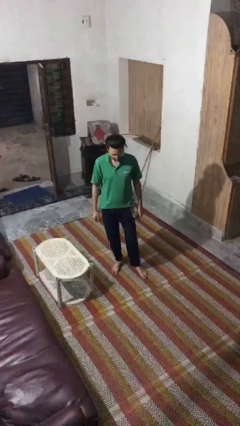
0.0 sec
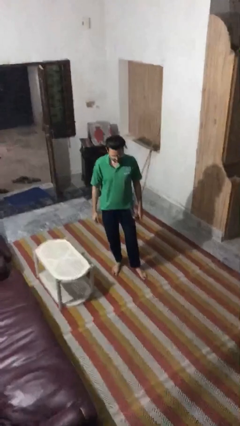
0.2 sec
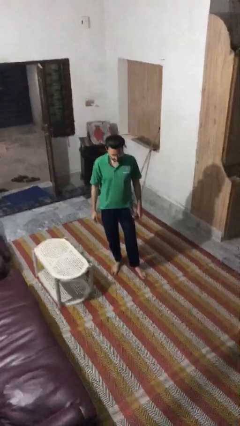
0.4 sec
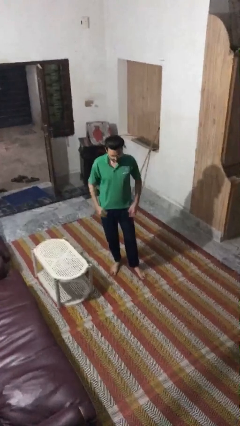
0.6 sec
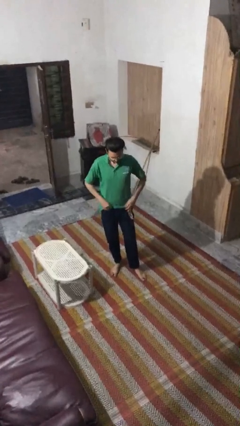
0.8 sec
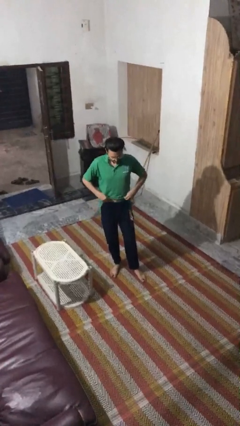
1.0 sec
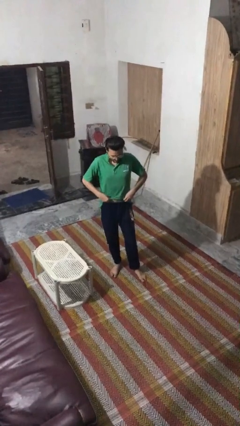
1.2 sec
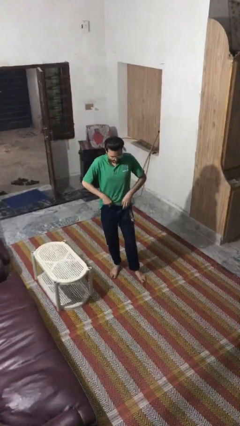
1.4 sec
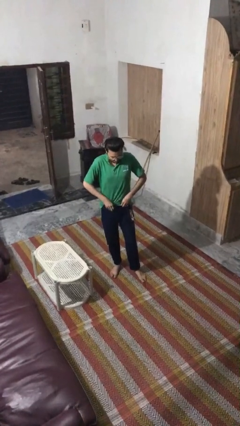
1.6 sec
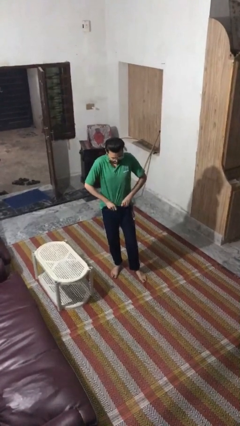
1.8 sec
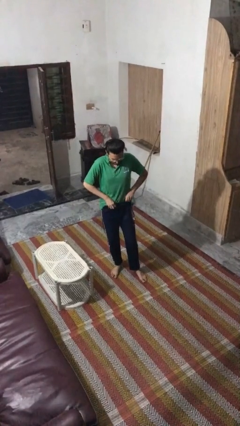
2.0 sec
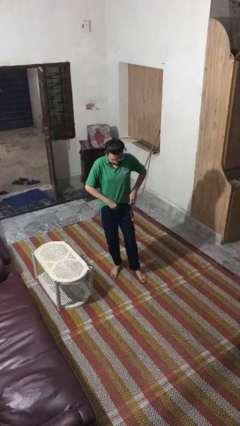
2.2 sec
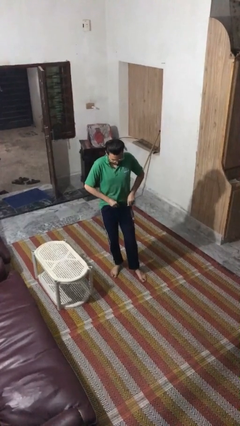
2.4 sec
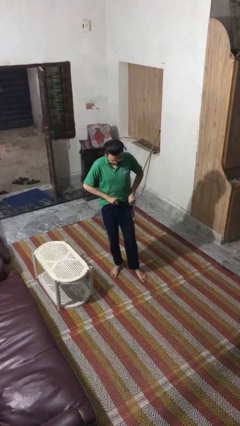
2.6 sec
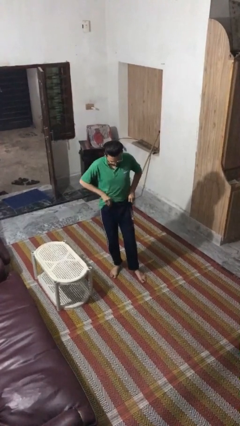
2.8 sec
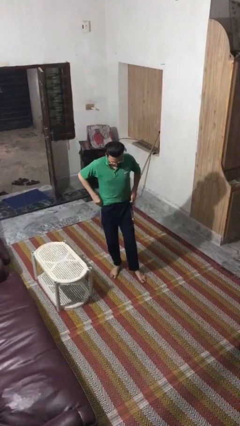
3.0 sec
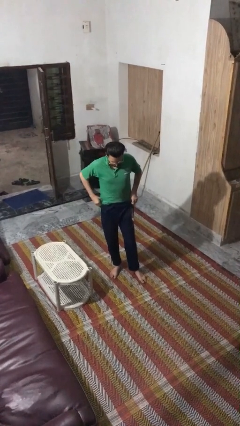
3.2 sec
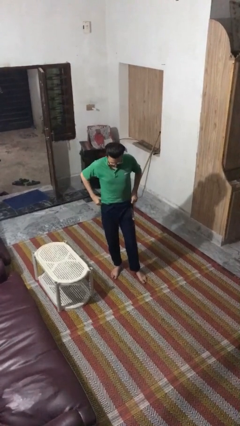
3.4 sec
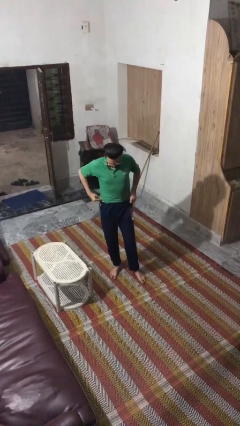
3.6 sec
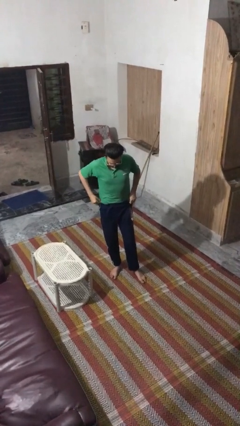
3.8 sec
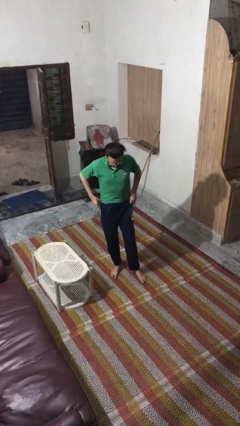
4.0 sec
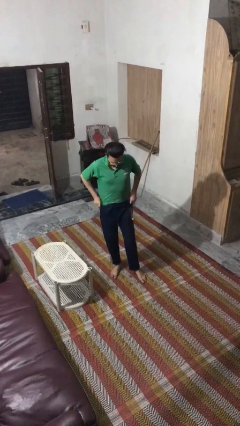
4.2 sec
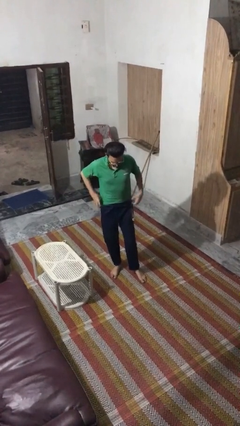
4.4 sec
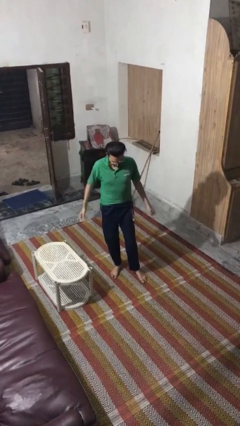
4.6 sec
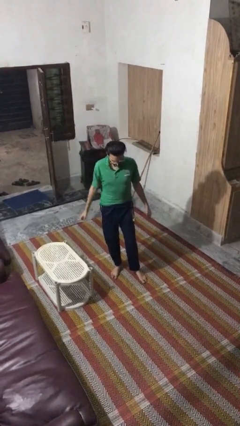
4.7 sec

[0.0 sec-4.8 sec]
person tucks in shirt

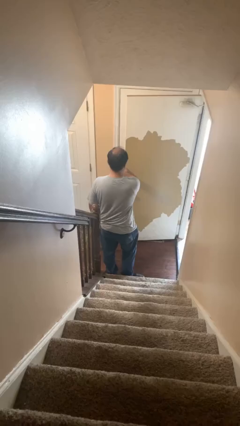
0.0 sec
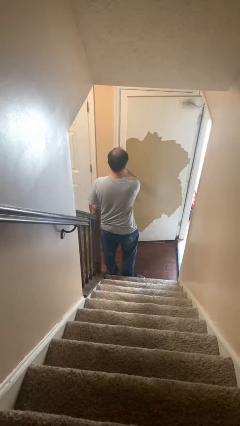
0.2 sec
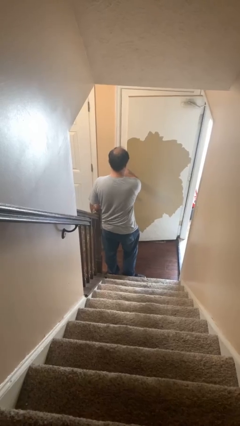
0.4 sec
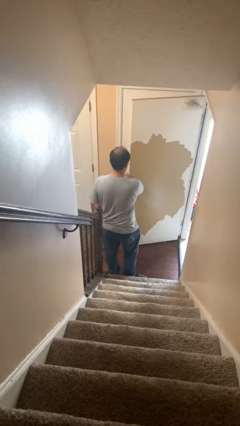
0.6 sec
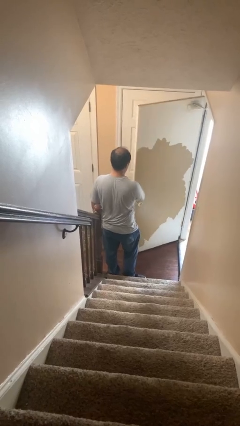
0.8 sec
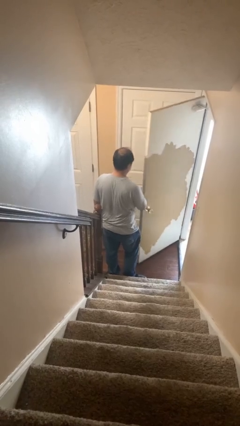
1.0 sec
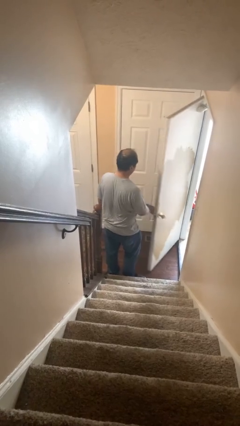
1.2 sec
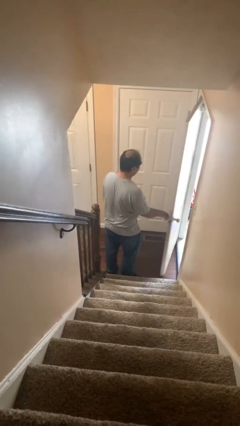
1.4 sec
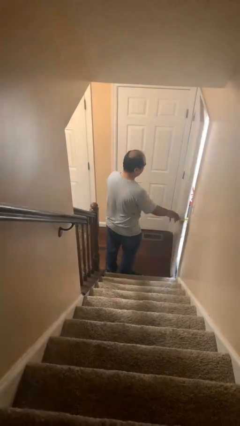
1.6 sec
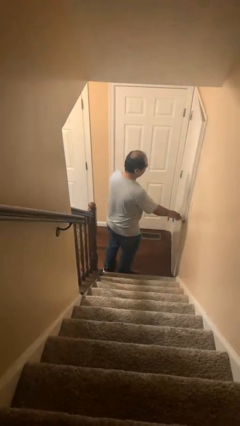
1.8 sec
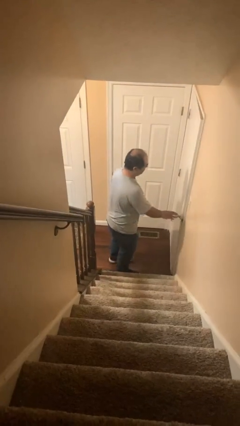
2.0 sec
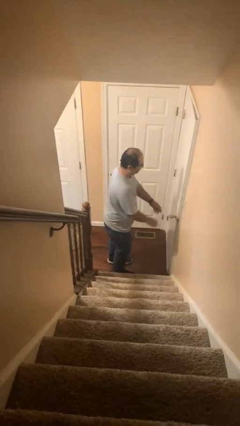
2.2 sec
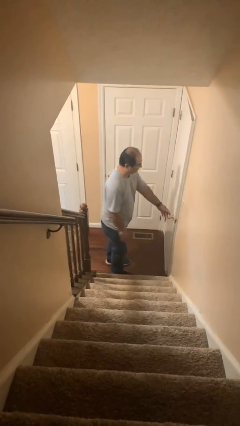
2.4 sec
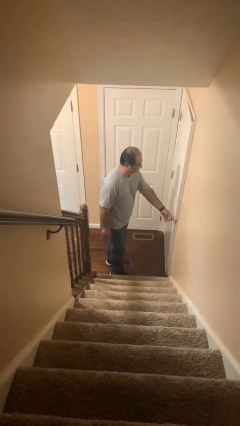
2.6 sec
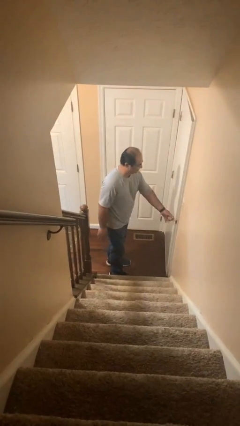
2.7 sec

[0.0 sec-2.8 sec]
person closes facility door

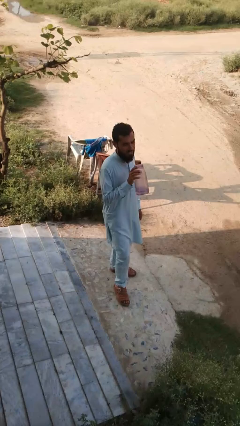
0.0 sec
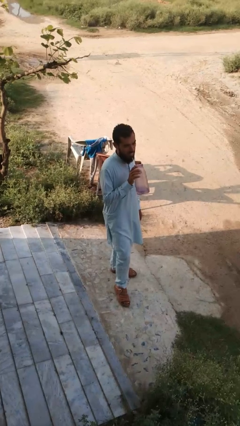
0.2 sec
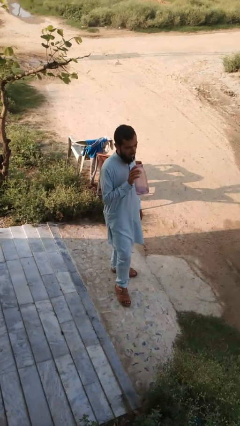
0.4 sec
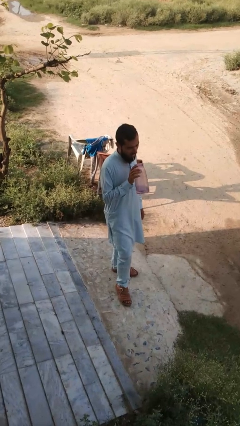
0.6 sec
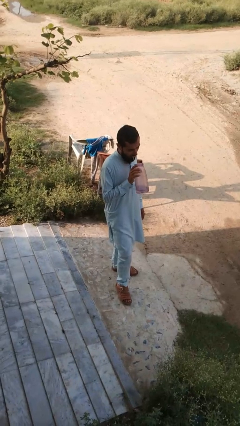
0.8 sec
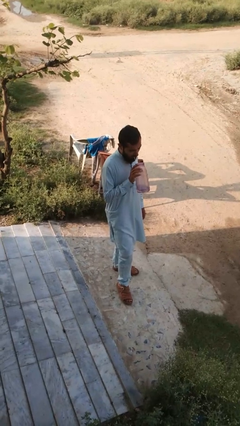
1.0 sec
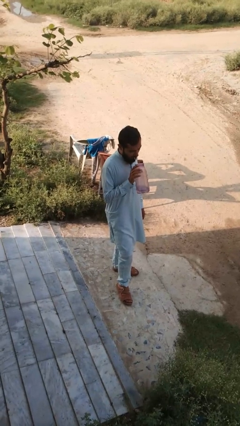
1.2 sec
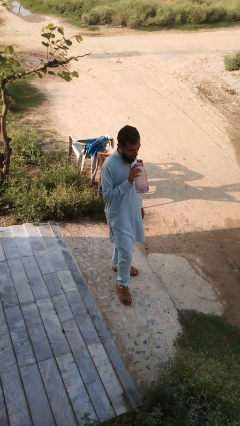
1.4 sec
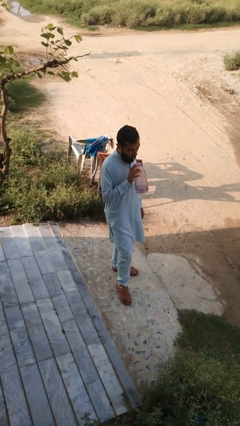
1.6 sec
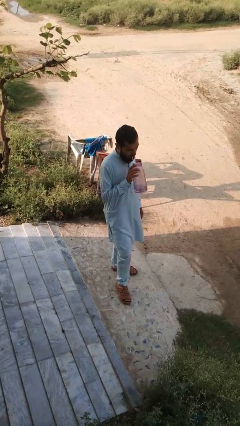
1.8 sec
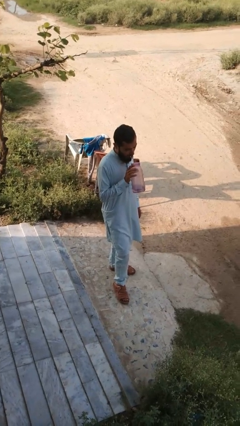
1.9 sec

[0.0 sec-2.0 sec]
person drinks from straw

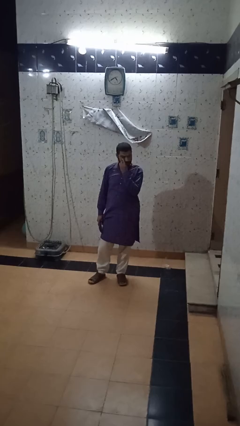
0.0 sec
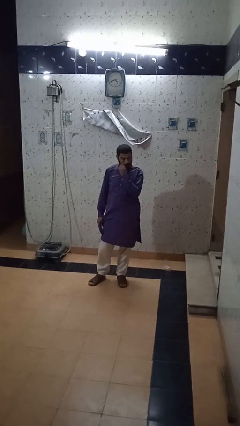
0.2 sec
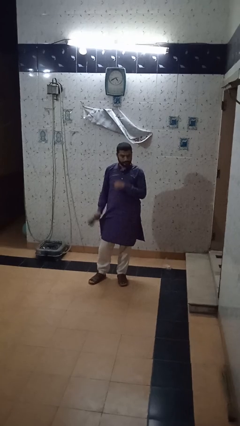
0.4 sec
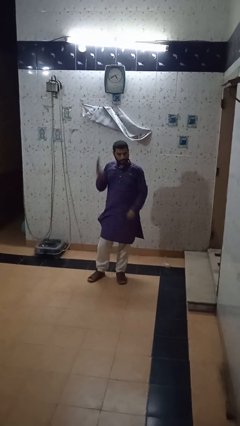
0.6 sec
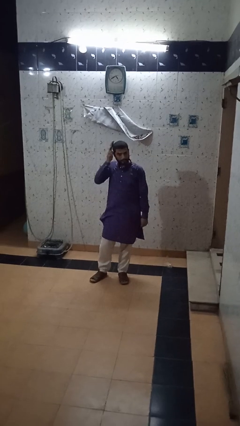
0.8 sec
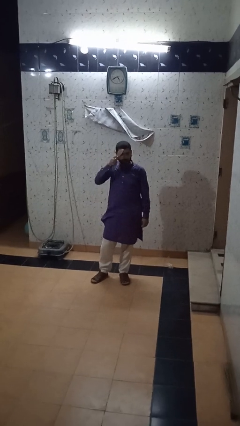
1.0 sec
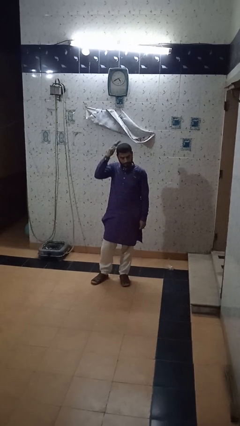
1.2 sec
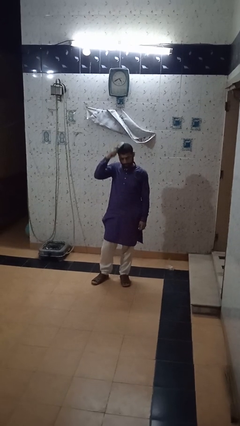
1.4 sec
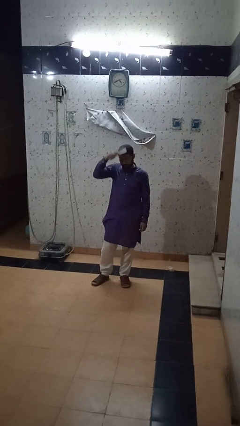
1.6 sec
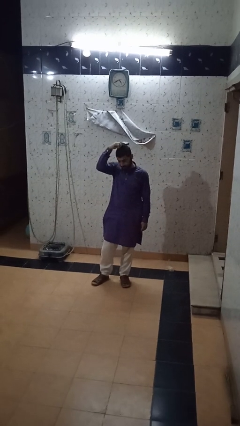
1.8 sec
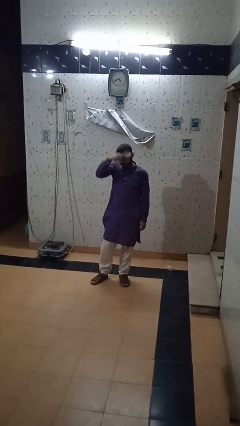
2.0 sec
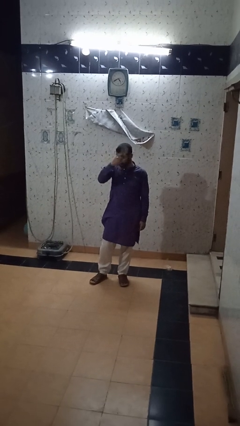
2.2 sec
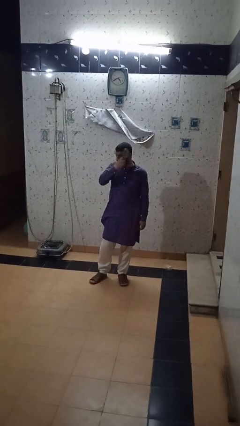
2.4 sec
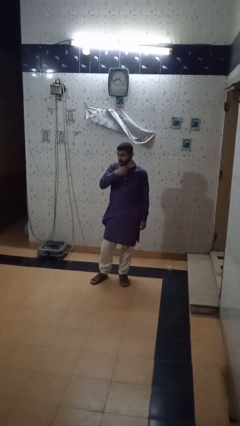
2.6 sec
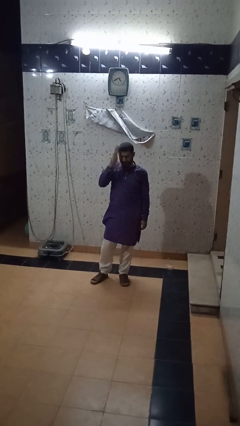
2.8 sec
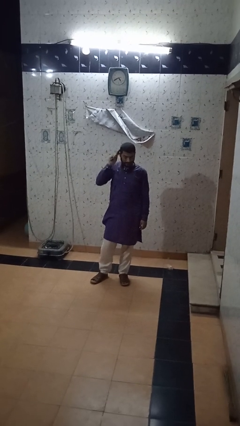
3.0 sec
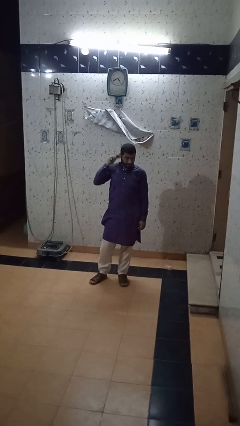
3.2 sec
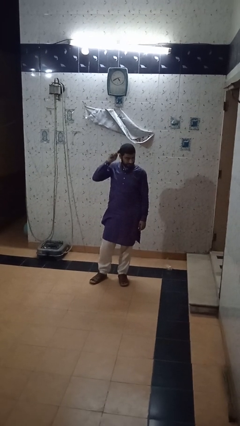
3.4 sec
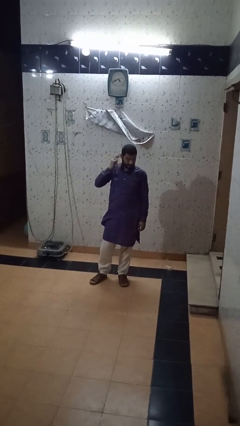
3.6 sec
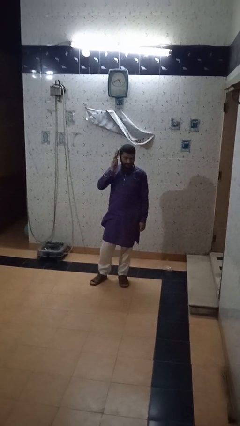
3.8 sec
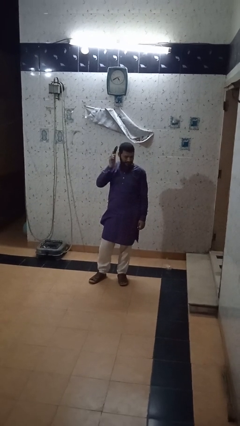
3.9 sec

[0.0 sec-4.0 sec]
person brushes hair

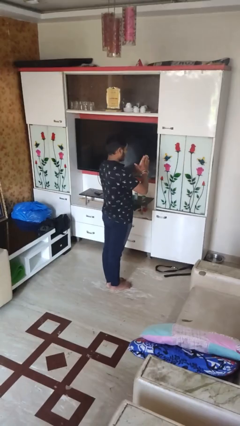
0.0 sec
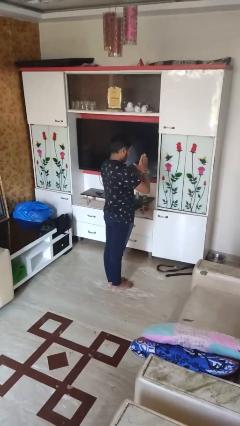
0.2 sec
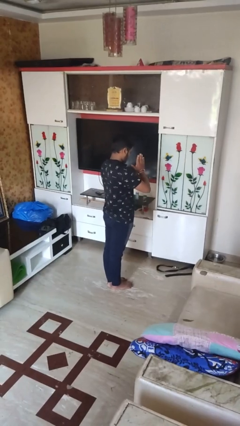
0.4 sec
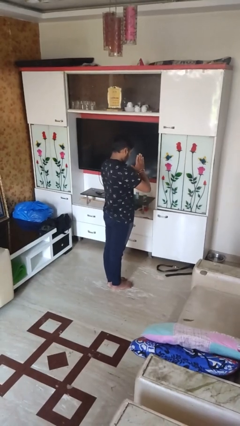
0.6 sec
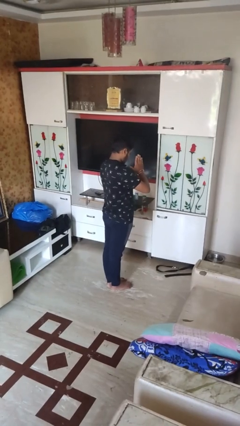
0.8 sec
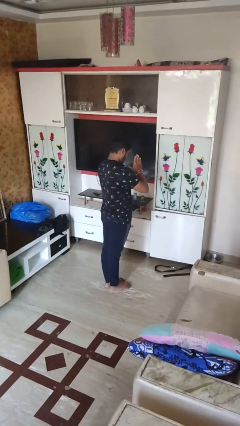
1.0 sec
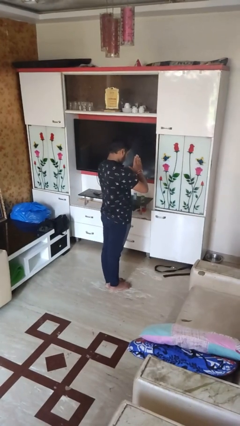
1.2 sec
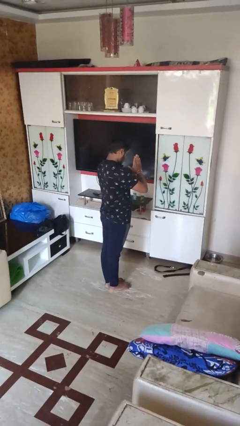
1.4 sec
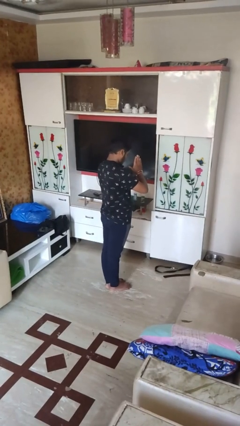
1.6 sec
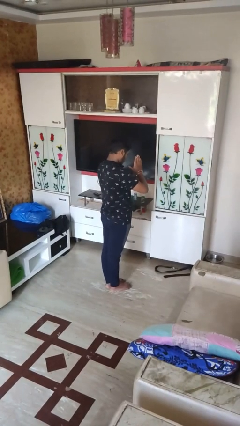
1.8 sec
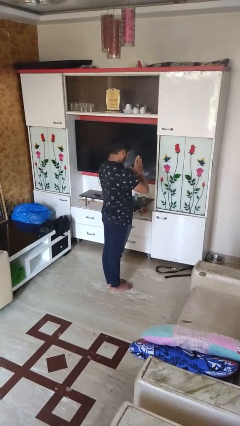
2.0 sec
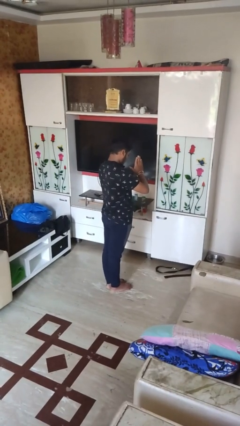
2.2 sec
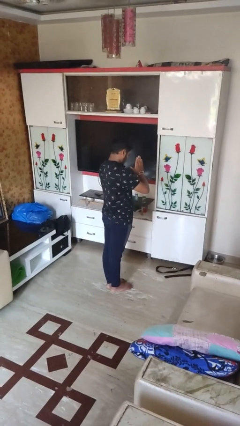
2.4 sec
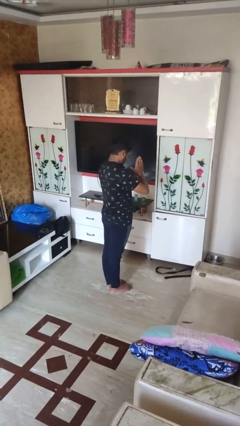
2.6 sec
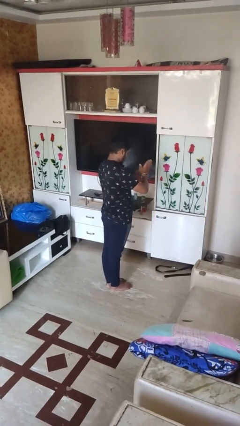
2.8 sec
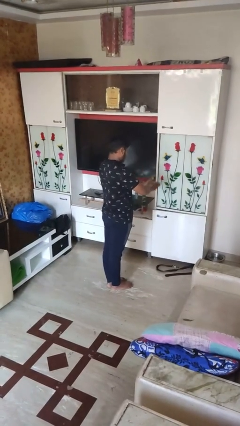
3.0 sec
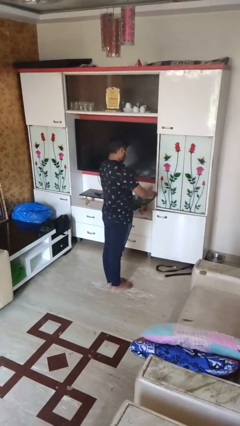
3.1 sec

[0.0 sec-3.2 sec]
person prays

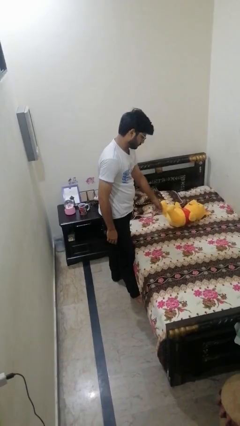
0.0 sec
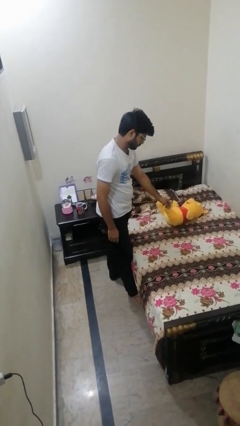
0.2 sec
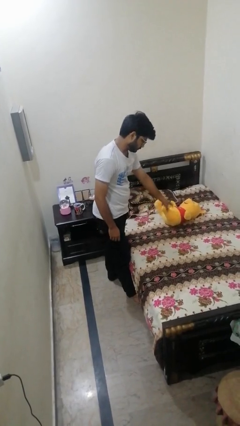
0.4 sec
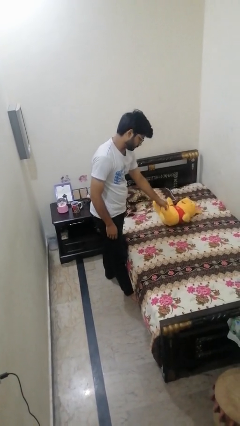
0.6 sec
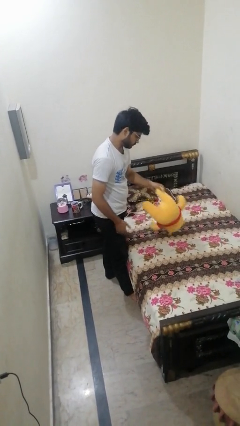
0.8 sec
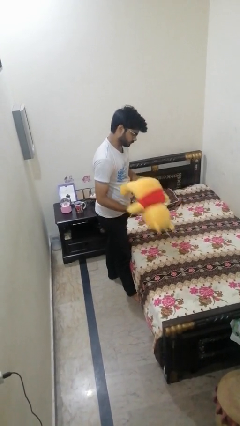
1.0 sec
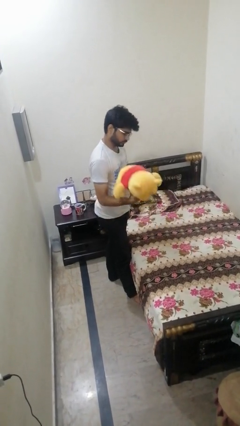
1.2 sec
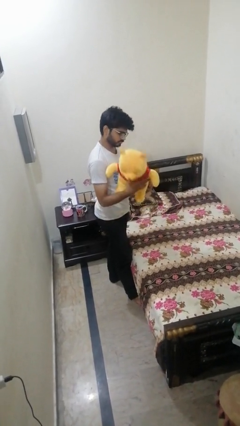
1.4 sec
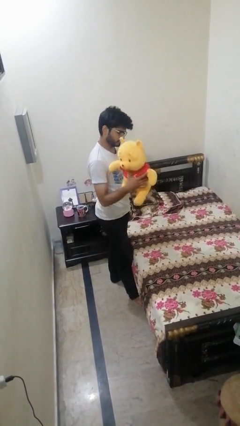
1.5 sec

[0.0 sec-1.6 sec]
person picks up object from bed
